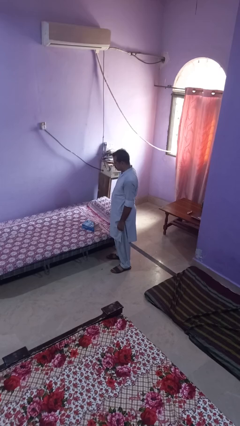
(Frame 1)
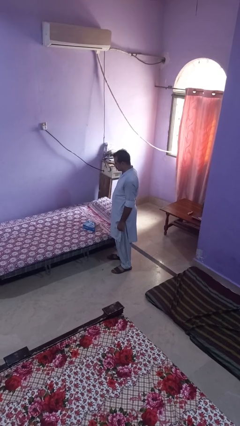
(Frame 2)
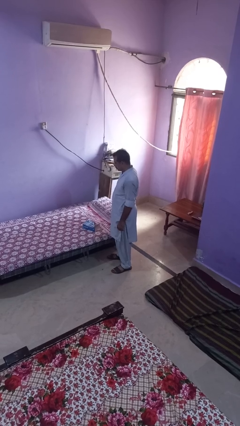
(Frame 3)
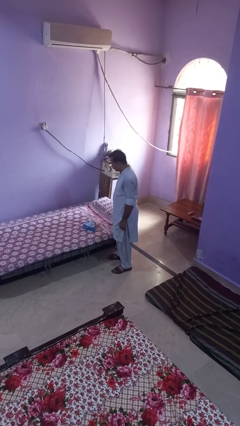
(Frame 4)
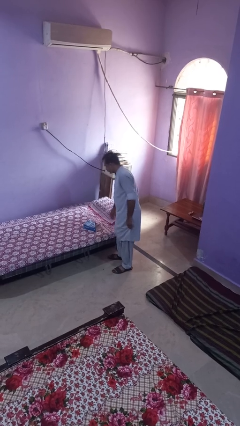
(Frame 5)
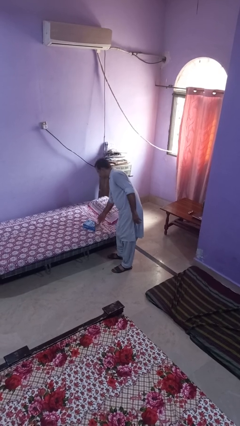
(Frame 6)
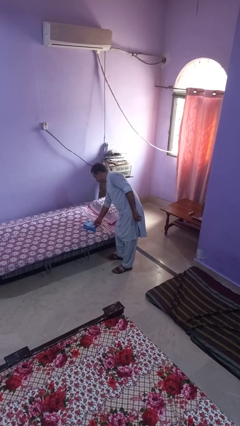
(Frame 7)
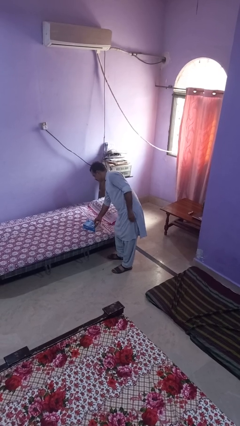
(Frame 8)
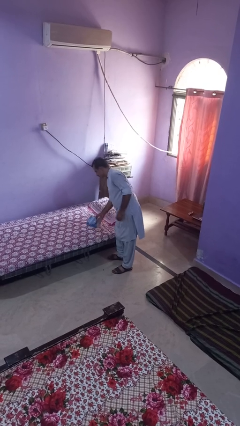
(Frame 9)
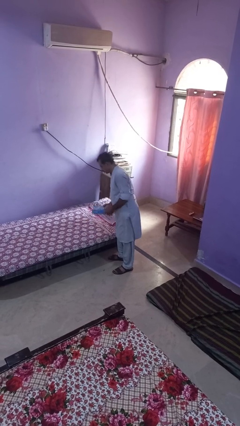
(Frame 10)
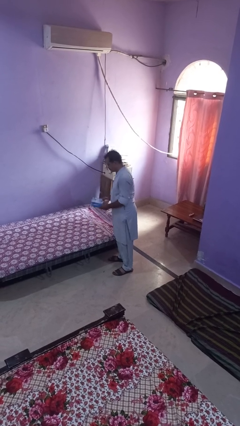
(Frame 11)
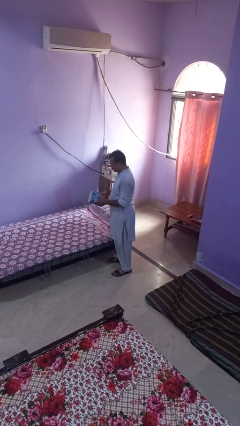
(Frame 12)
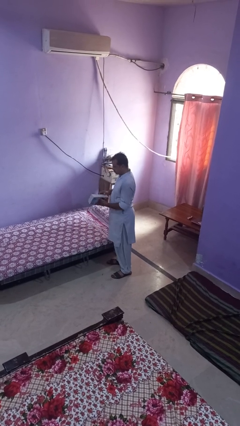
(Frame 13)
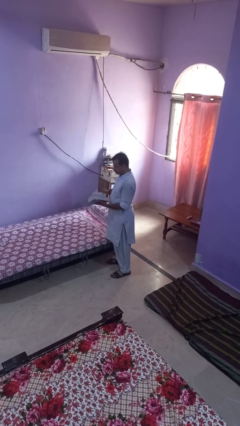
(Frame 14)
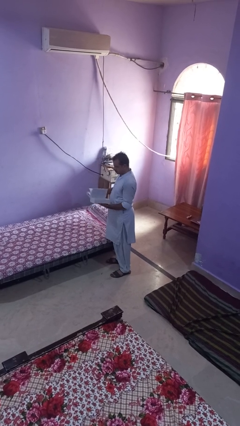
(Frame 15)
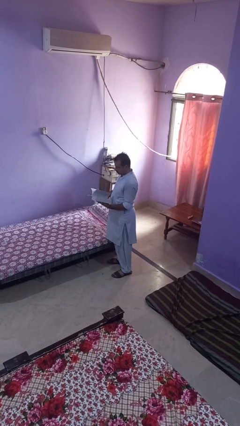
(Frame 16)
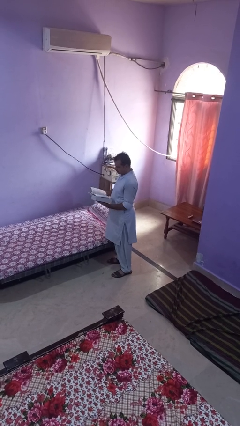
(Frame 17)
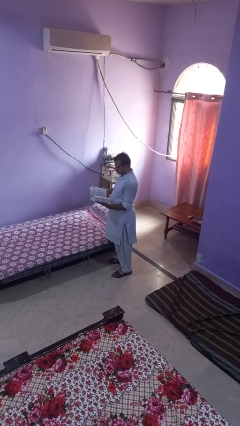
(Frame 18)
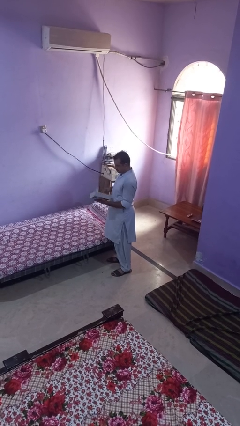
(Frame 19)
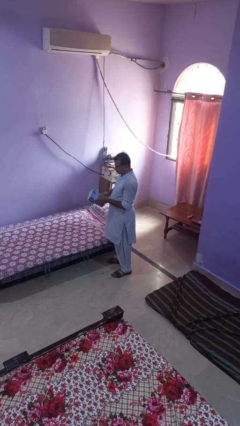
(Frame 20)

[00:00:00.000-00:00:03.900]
person picks up object from bed

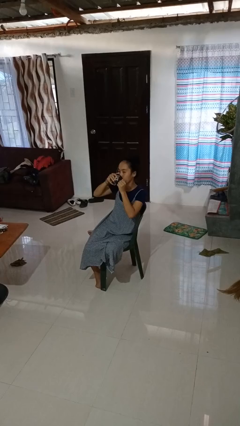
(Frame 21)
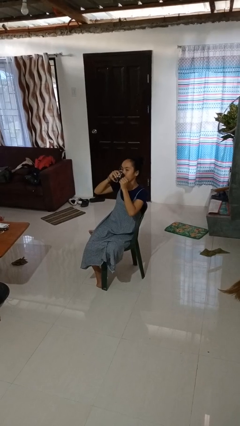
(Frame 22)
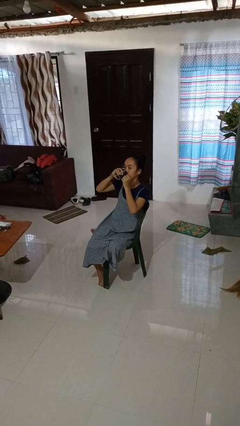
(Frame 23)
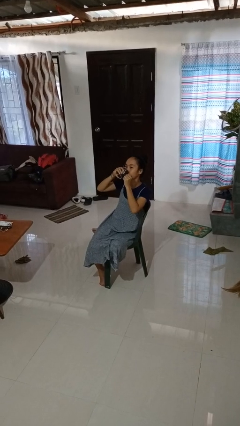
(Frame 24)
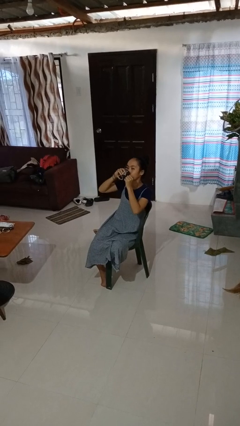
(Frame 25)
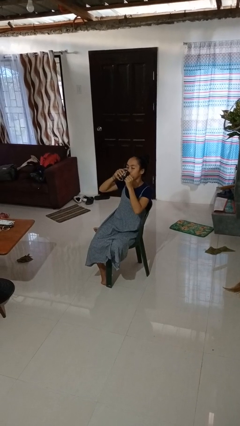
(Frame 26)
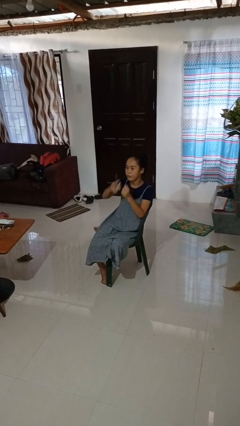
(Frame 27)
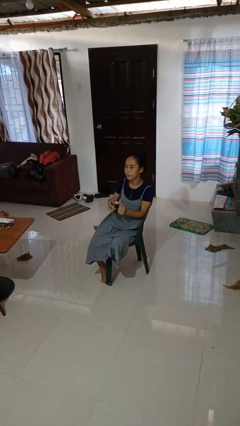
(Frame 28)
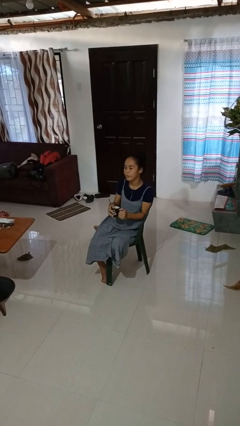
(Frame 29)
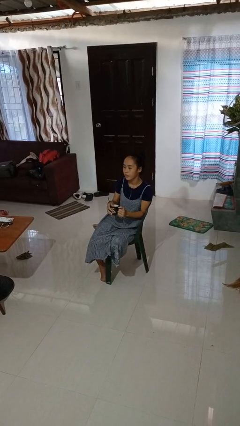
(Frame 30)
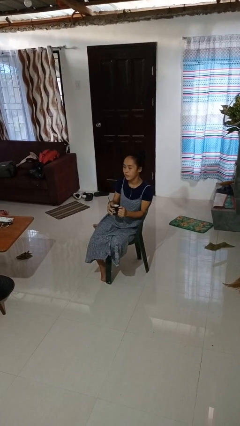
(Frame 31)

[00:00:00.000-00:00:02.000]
person drinks from mug

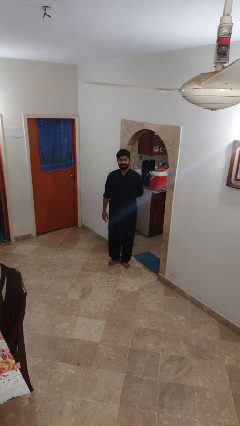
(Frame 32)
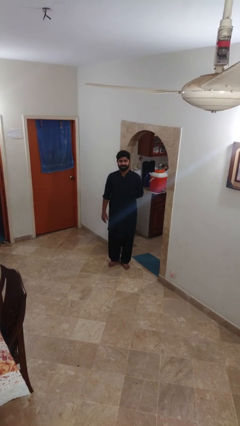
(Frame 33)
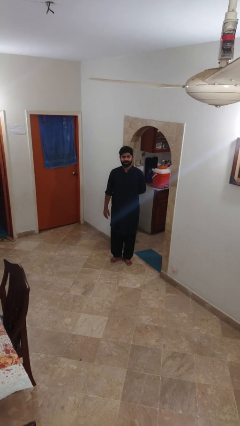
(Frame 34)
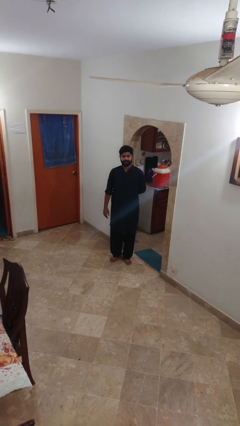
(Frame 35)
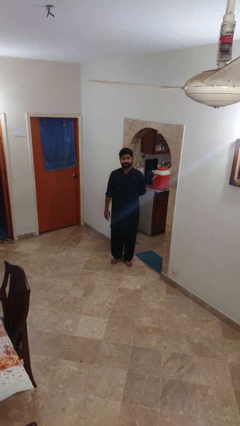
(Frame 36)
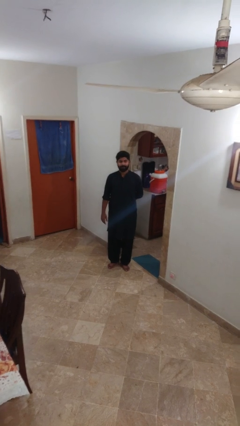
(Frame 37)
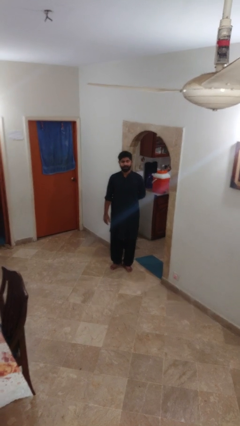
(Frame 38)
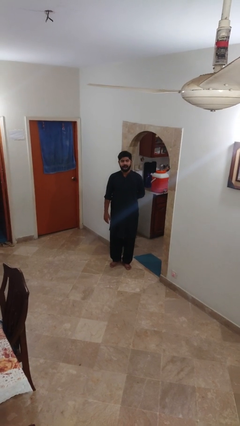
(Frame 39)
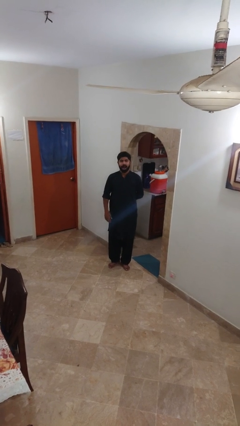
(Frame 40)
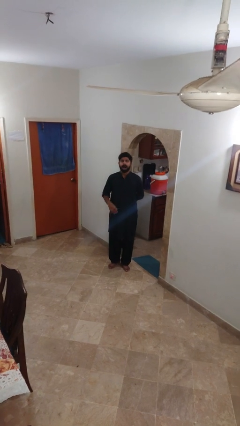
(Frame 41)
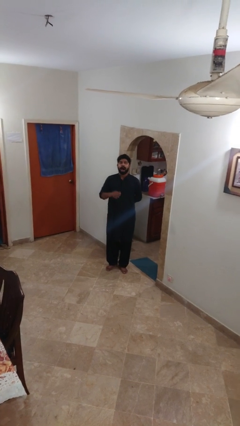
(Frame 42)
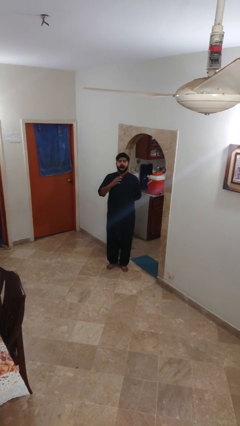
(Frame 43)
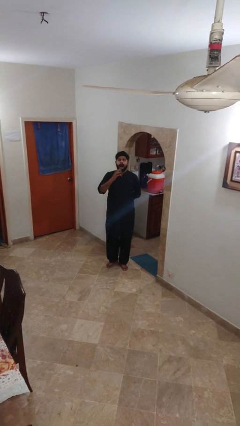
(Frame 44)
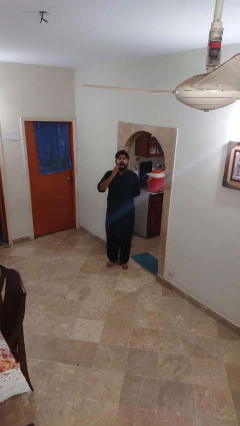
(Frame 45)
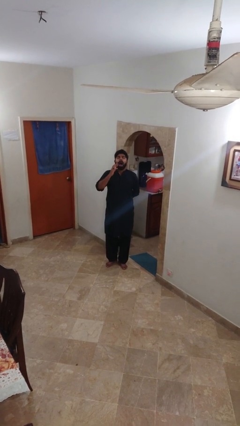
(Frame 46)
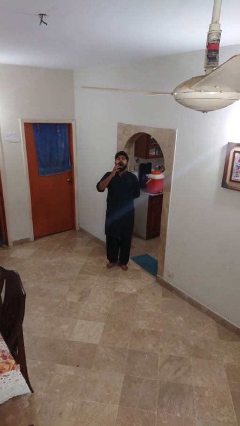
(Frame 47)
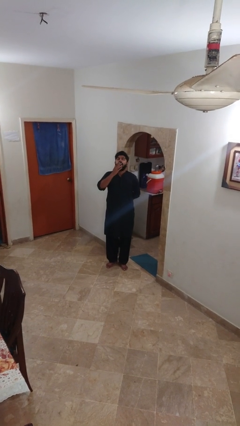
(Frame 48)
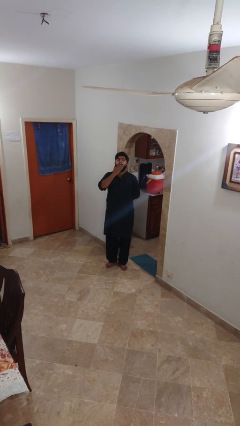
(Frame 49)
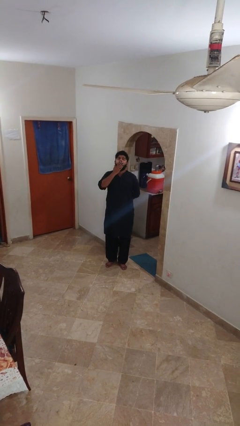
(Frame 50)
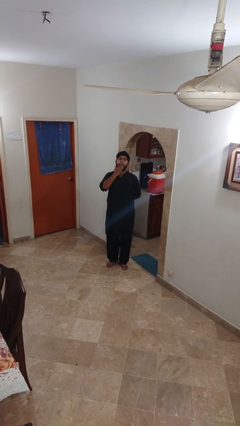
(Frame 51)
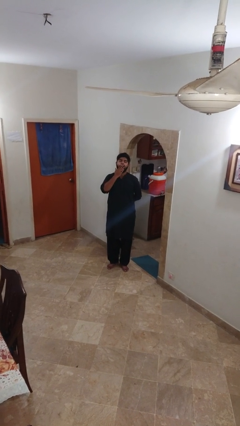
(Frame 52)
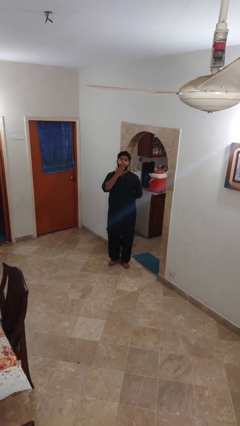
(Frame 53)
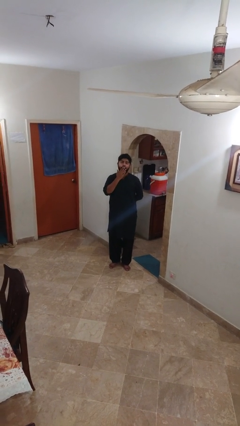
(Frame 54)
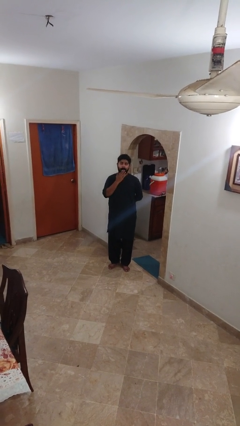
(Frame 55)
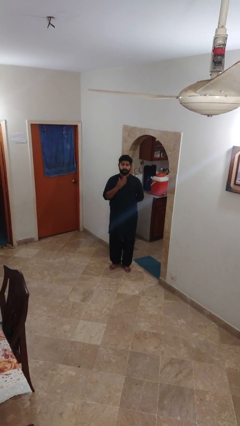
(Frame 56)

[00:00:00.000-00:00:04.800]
person yawns

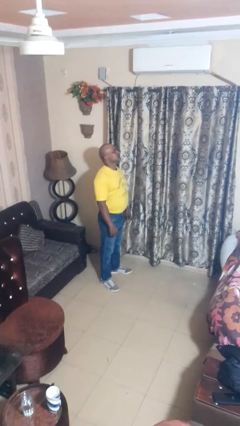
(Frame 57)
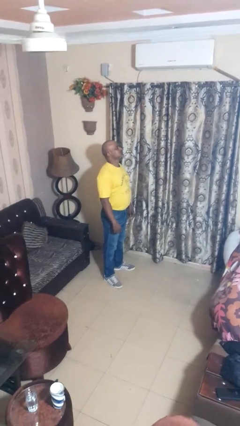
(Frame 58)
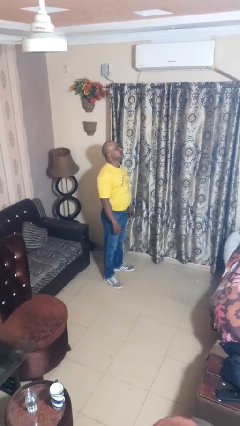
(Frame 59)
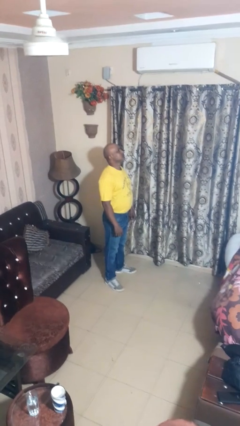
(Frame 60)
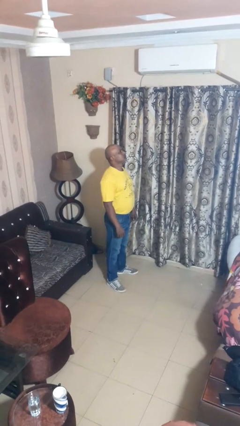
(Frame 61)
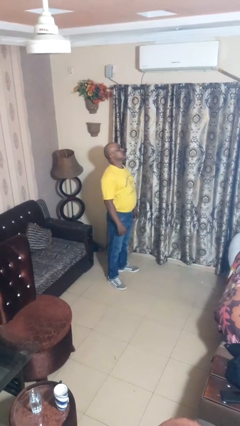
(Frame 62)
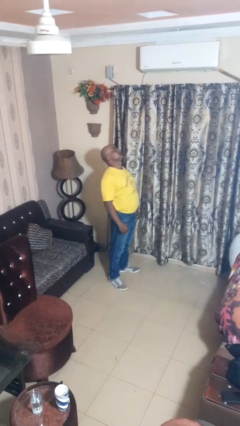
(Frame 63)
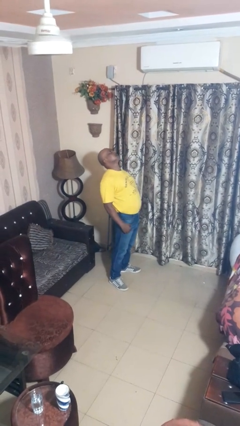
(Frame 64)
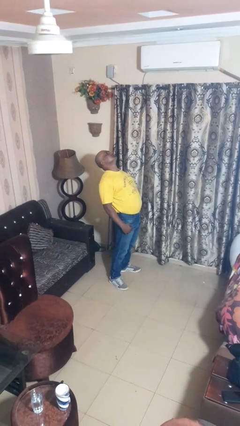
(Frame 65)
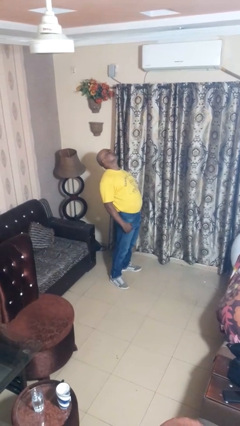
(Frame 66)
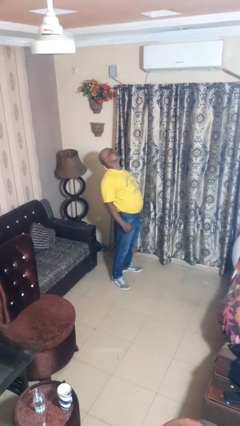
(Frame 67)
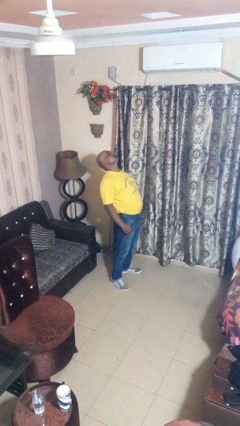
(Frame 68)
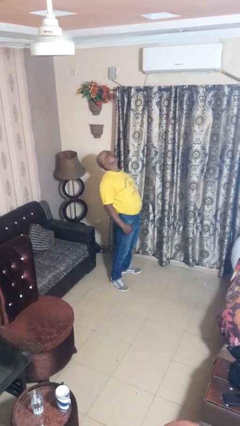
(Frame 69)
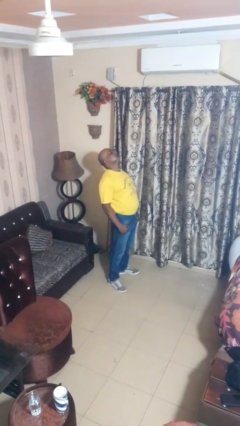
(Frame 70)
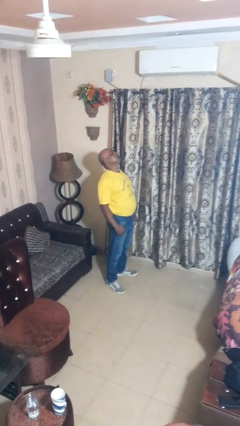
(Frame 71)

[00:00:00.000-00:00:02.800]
person stretches back

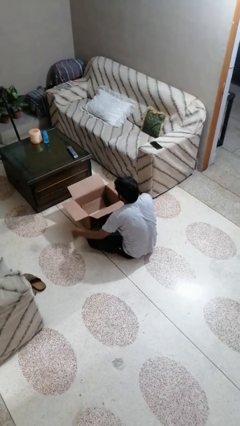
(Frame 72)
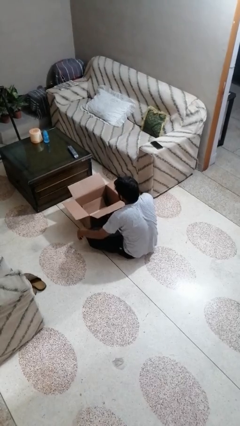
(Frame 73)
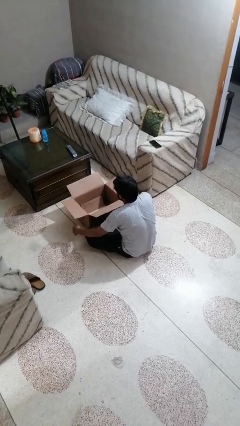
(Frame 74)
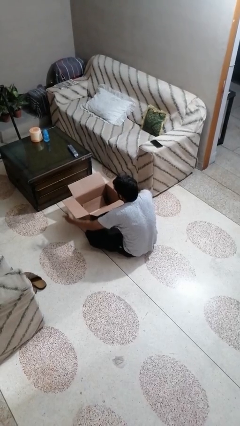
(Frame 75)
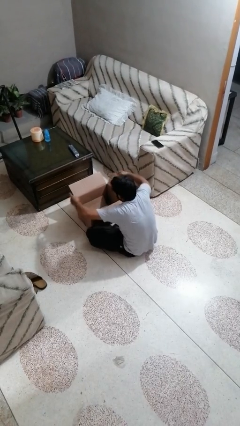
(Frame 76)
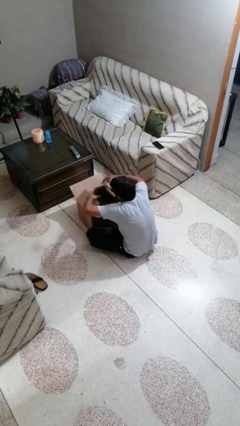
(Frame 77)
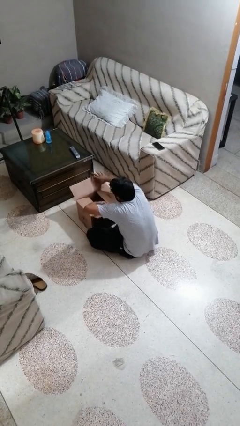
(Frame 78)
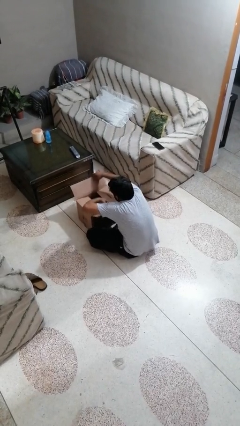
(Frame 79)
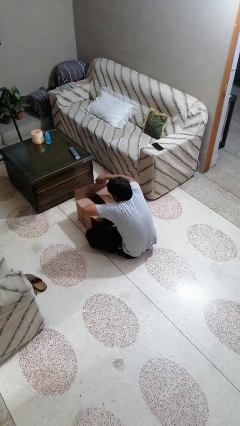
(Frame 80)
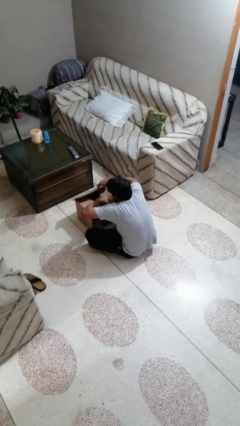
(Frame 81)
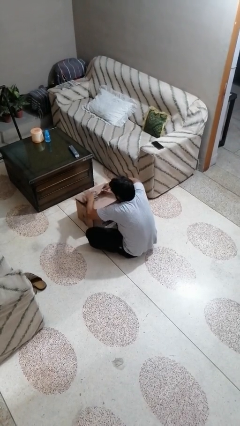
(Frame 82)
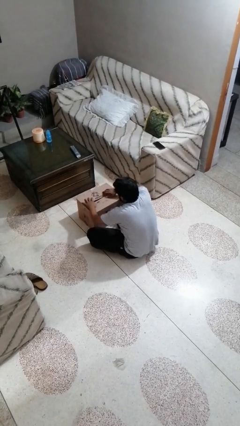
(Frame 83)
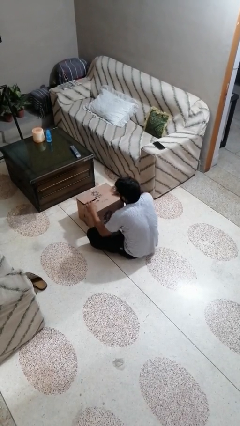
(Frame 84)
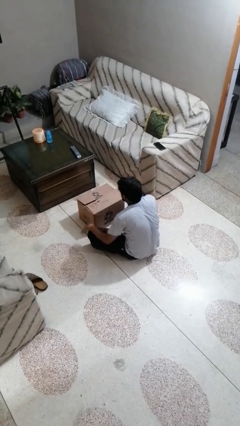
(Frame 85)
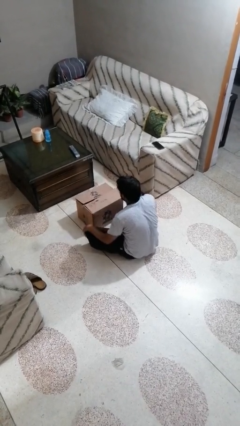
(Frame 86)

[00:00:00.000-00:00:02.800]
person closes box

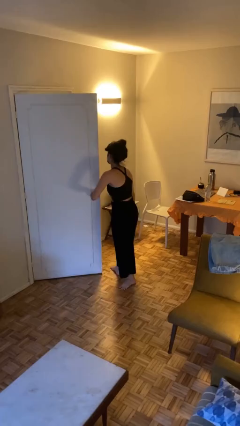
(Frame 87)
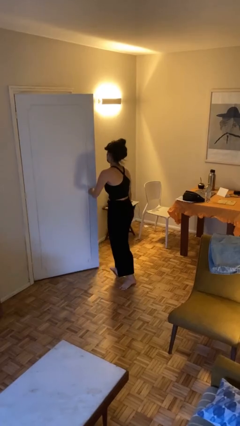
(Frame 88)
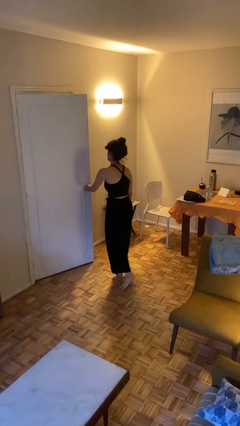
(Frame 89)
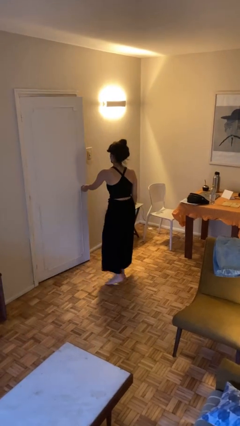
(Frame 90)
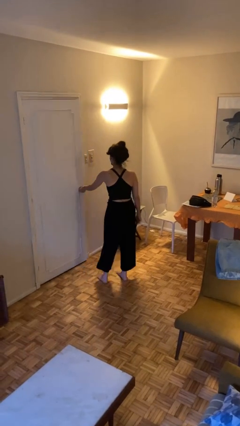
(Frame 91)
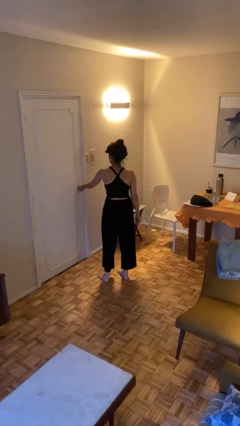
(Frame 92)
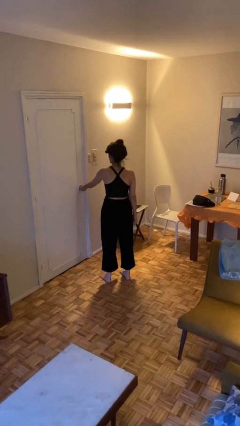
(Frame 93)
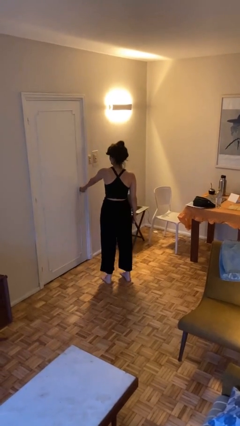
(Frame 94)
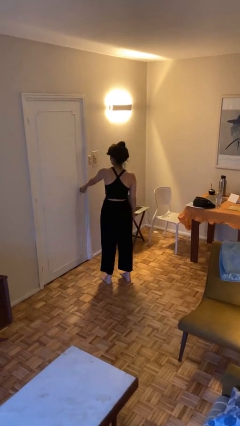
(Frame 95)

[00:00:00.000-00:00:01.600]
person closes facility door
